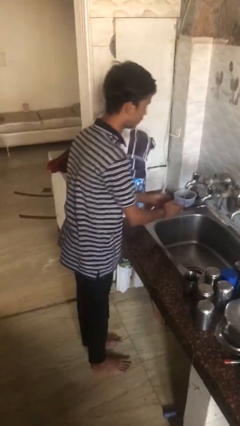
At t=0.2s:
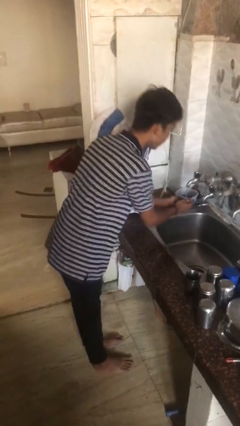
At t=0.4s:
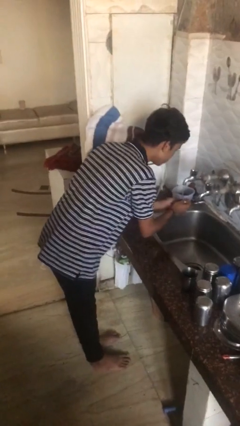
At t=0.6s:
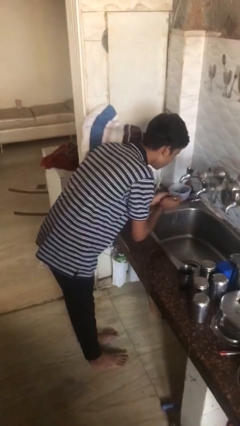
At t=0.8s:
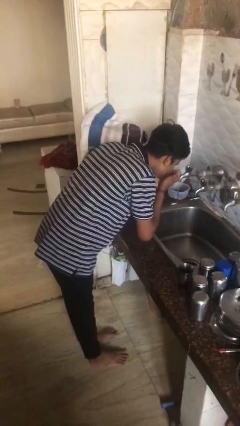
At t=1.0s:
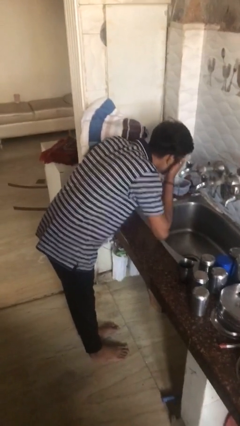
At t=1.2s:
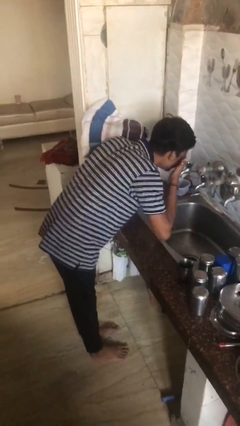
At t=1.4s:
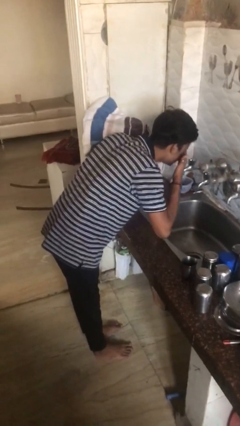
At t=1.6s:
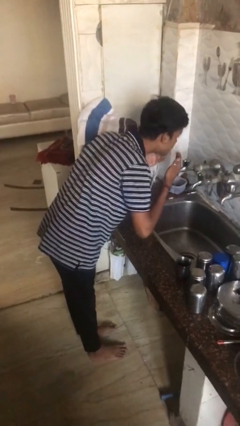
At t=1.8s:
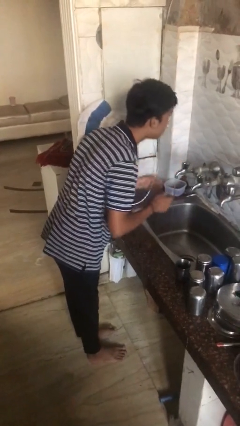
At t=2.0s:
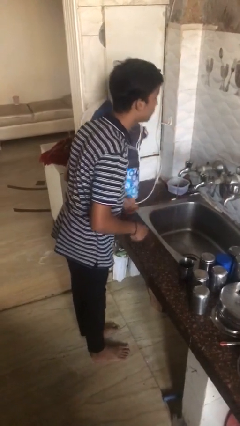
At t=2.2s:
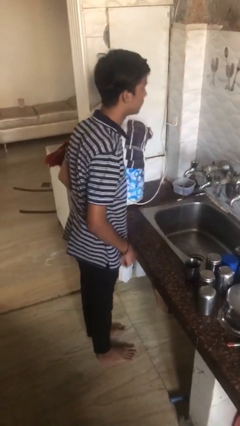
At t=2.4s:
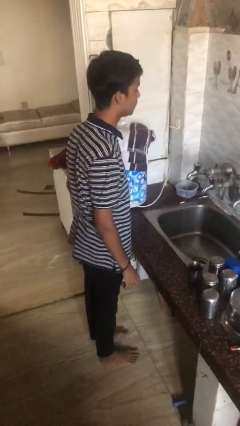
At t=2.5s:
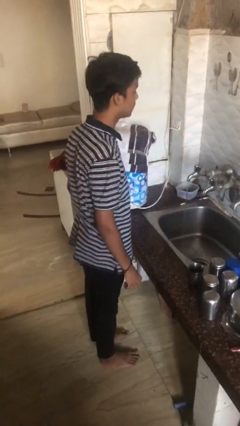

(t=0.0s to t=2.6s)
person washes face

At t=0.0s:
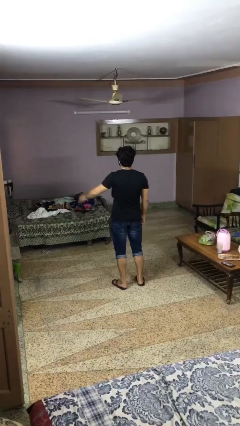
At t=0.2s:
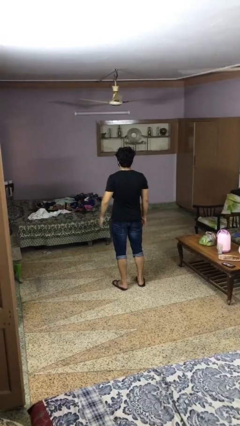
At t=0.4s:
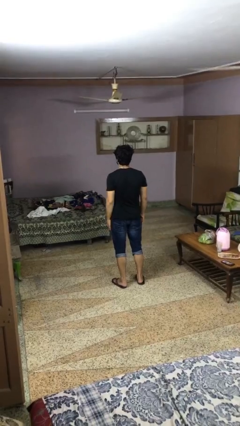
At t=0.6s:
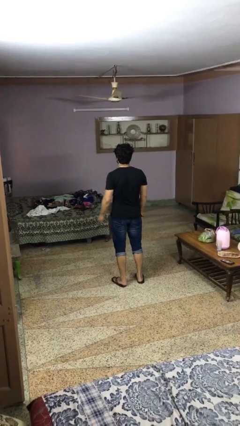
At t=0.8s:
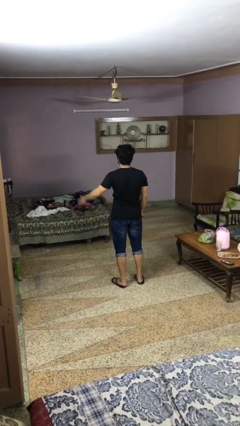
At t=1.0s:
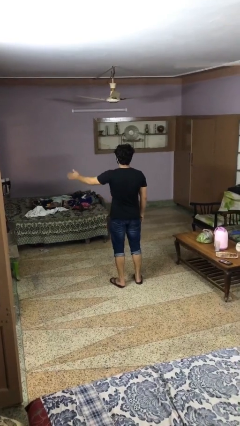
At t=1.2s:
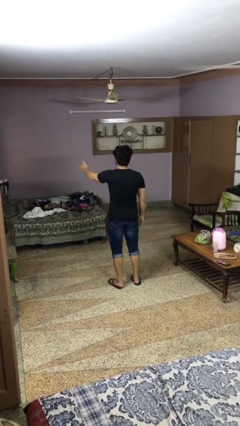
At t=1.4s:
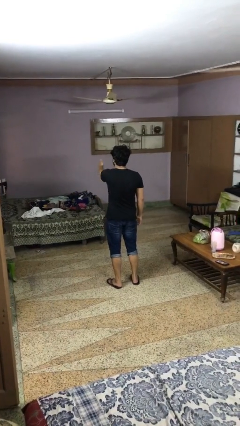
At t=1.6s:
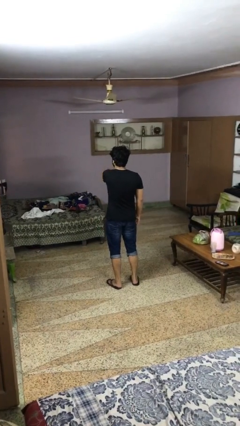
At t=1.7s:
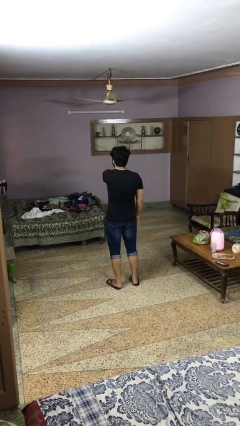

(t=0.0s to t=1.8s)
person gestures swipe right

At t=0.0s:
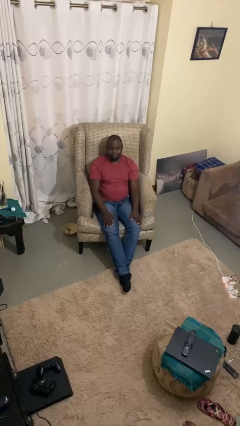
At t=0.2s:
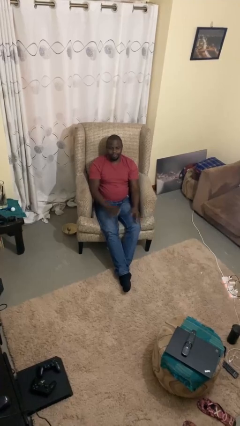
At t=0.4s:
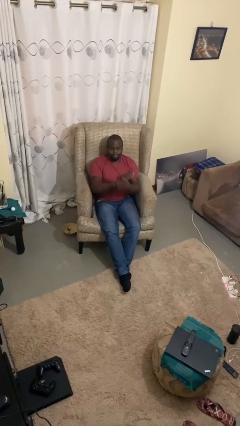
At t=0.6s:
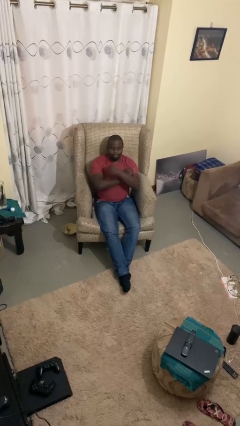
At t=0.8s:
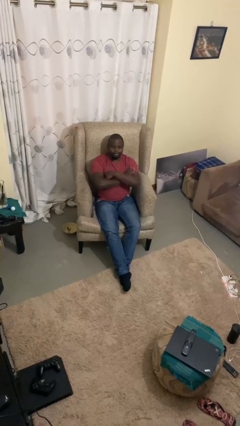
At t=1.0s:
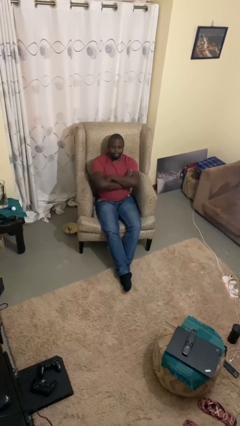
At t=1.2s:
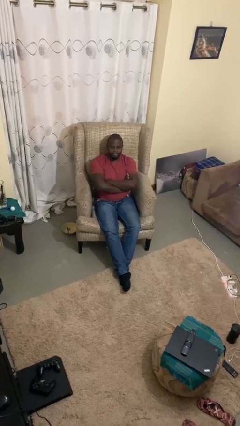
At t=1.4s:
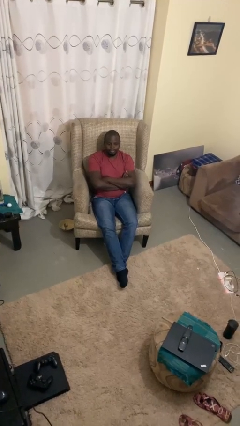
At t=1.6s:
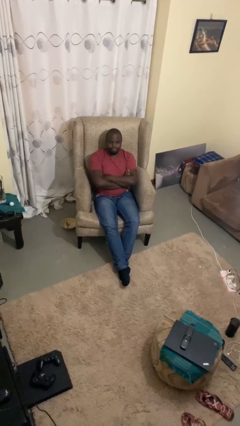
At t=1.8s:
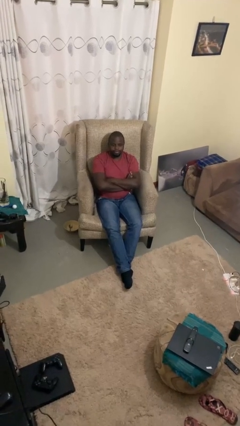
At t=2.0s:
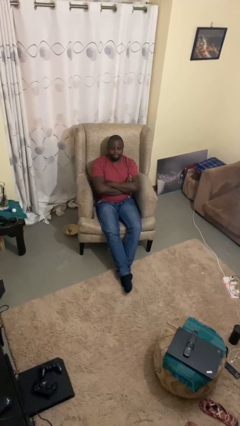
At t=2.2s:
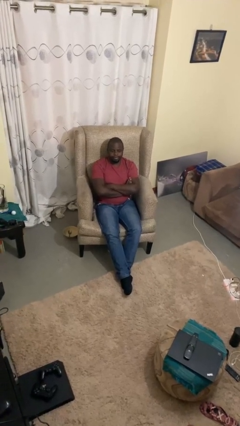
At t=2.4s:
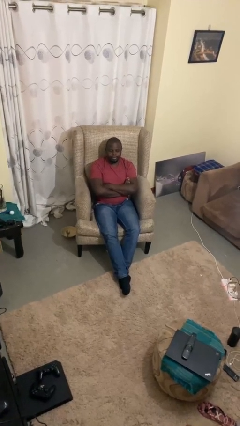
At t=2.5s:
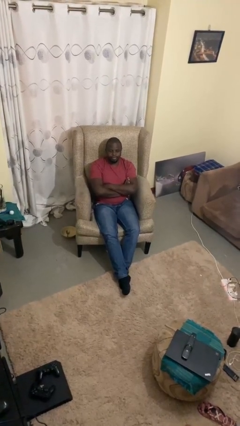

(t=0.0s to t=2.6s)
person crosses arms

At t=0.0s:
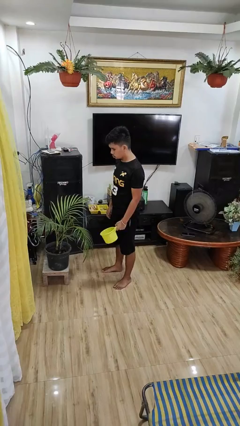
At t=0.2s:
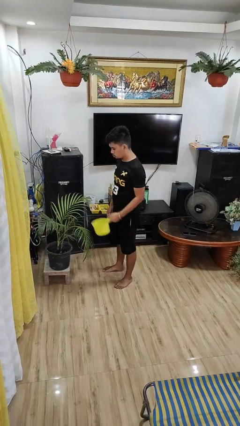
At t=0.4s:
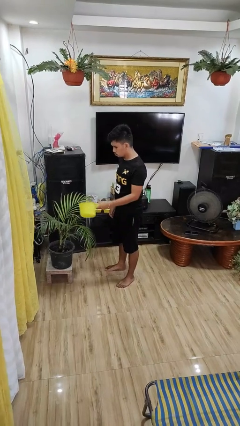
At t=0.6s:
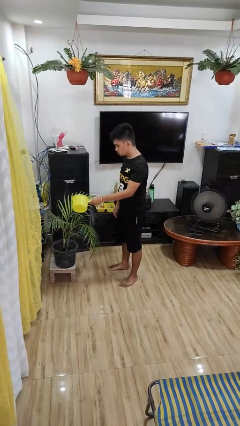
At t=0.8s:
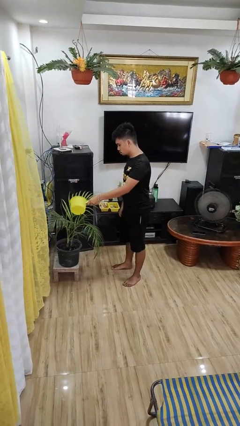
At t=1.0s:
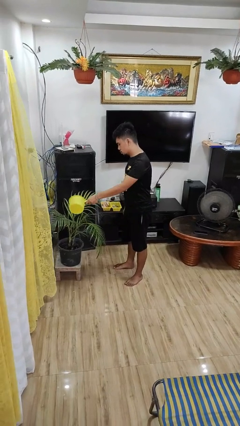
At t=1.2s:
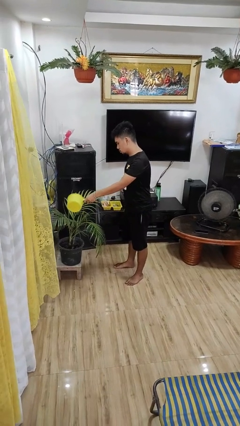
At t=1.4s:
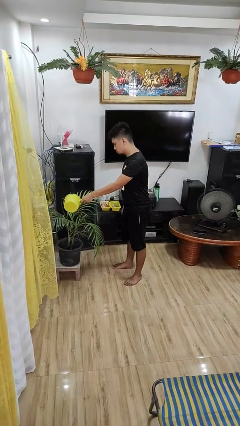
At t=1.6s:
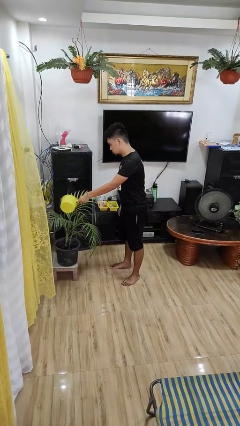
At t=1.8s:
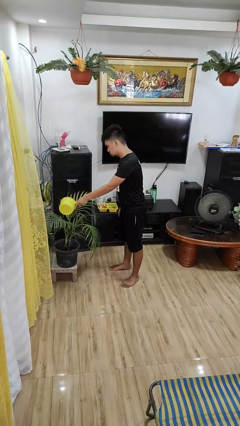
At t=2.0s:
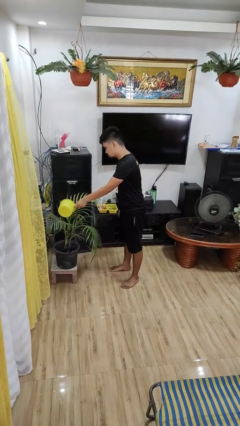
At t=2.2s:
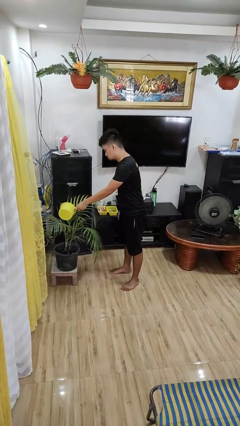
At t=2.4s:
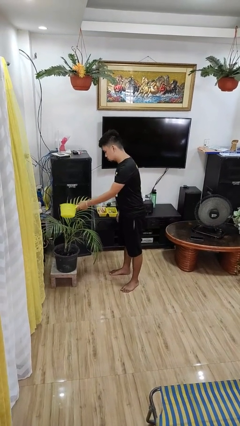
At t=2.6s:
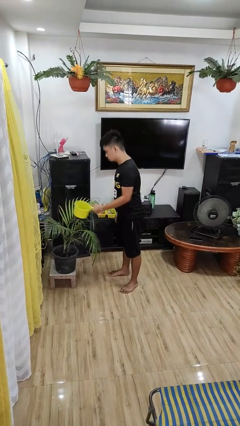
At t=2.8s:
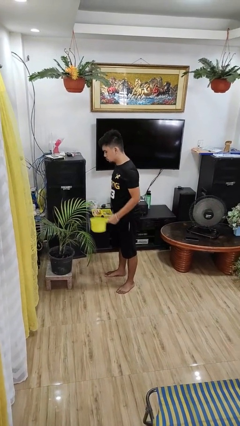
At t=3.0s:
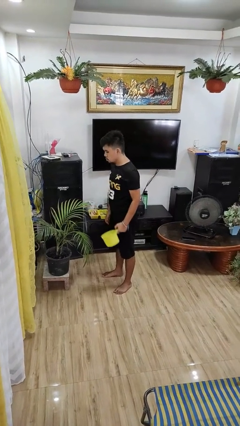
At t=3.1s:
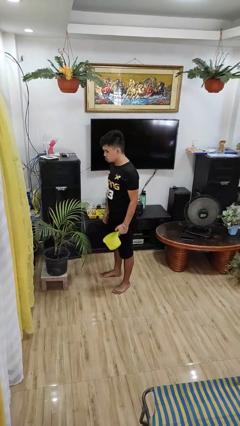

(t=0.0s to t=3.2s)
person waters houseplant

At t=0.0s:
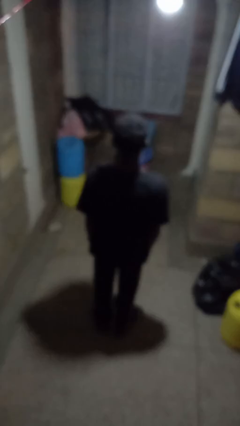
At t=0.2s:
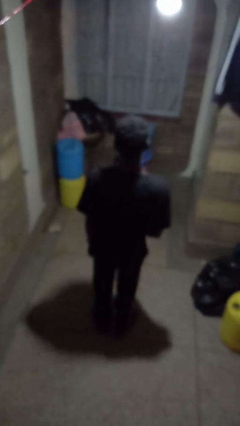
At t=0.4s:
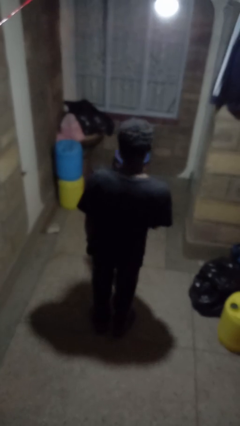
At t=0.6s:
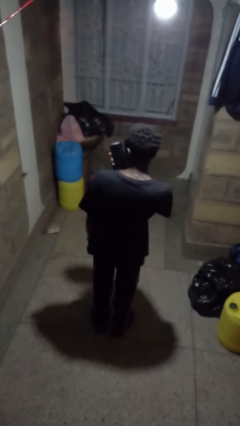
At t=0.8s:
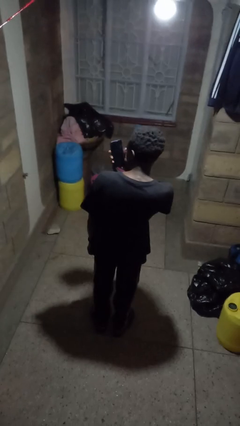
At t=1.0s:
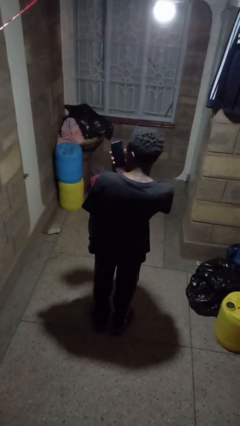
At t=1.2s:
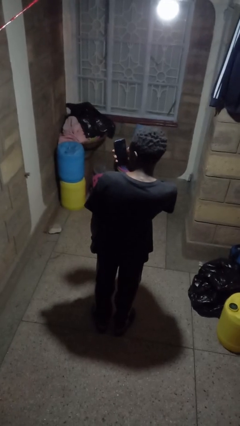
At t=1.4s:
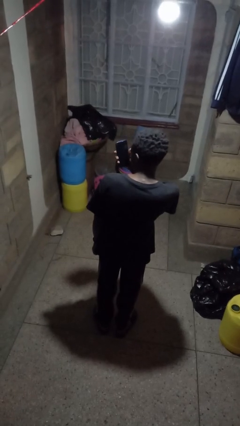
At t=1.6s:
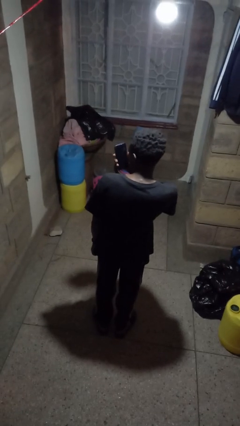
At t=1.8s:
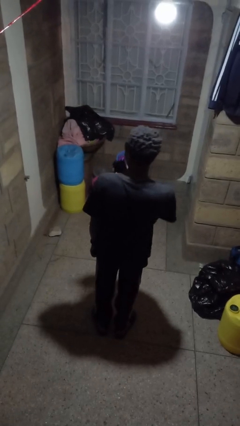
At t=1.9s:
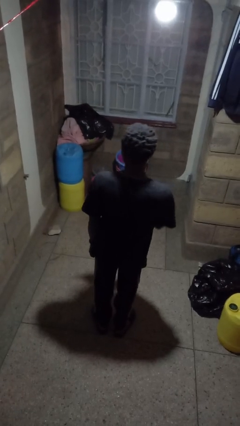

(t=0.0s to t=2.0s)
person takes selfie

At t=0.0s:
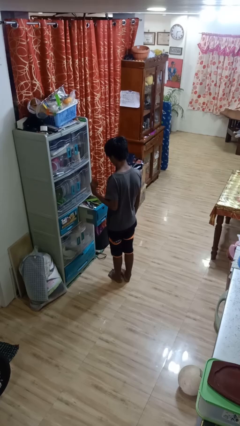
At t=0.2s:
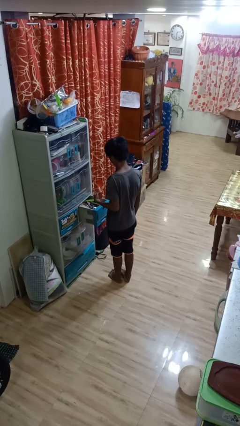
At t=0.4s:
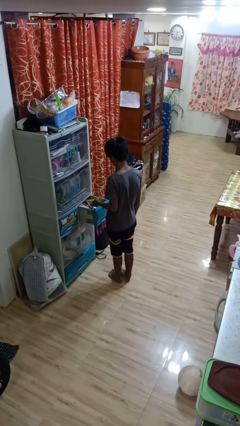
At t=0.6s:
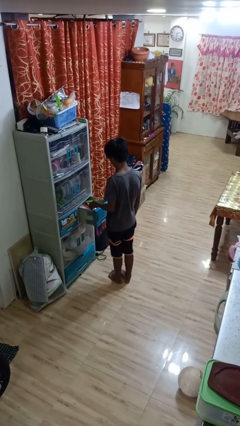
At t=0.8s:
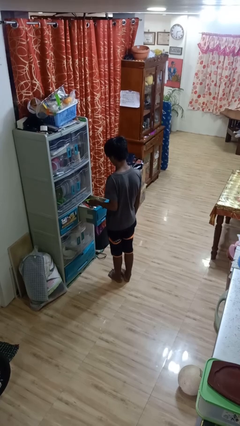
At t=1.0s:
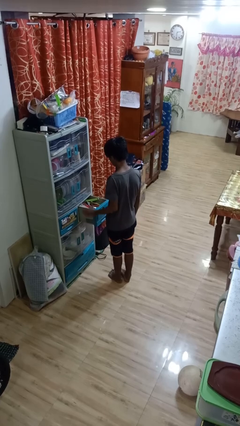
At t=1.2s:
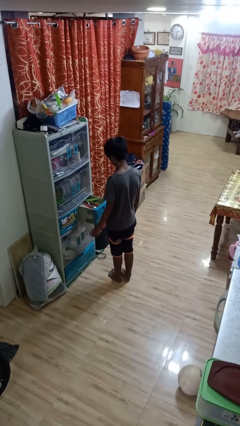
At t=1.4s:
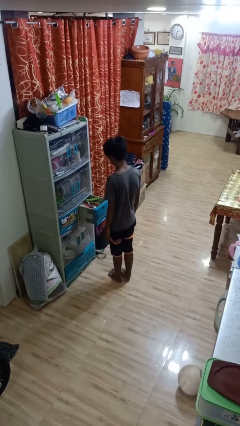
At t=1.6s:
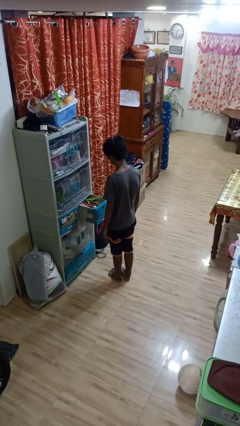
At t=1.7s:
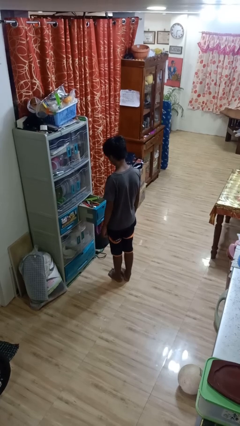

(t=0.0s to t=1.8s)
person puts object into kitchen drawer

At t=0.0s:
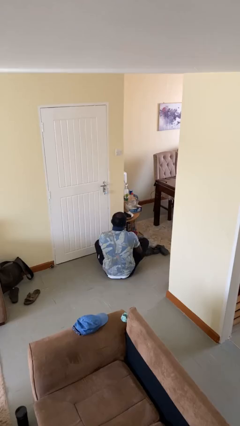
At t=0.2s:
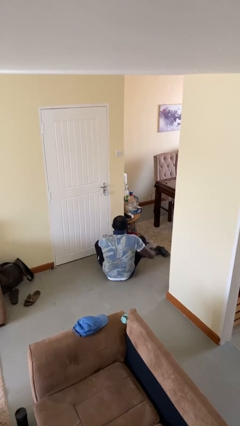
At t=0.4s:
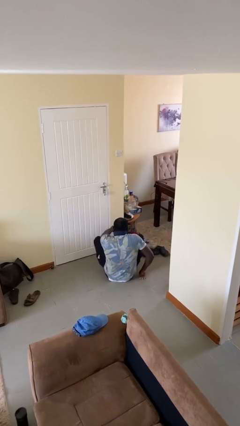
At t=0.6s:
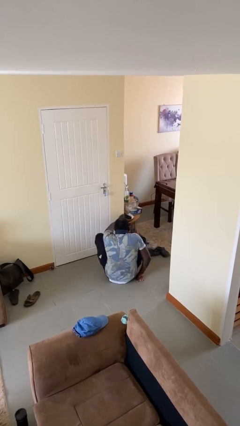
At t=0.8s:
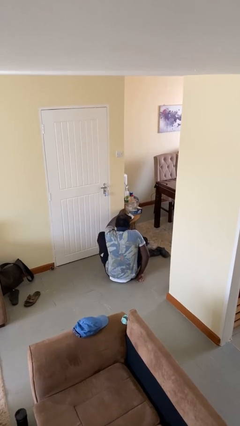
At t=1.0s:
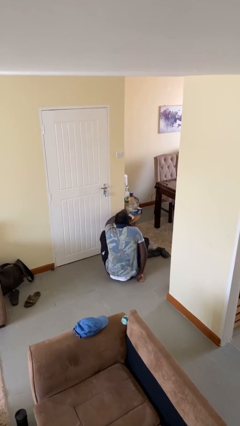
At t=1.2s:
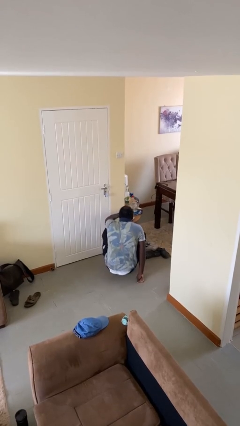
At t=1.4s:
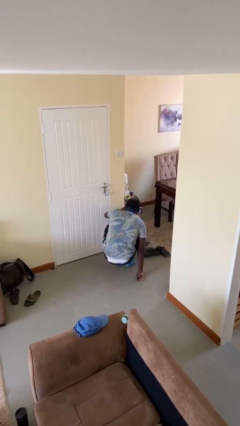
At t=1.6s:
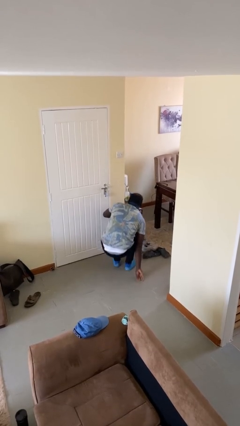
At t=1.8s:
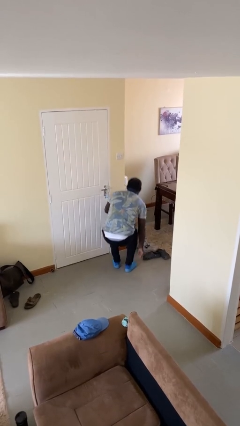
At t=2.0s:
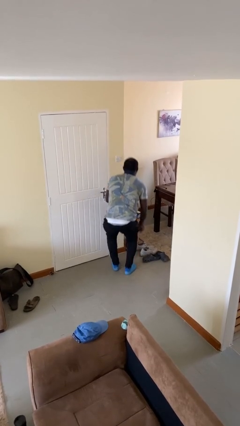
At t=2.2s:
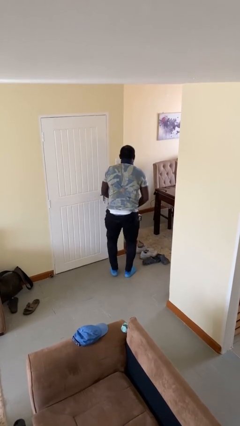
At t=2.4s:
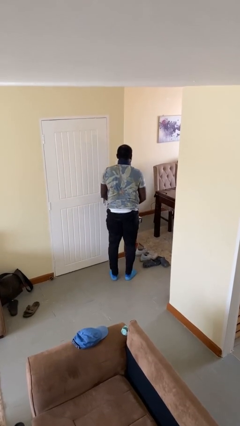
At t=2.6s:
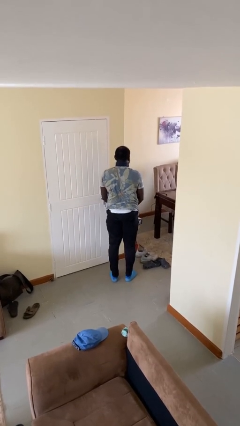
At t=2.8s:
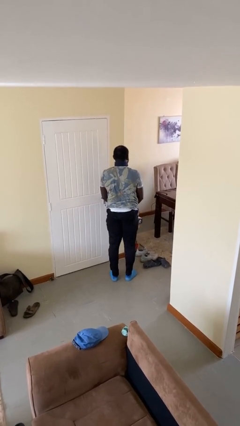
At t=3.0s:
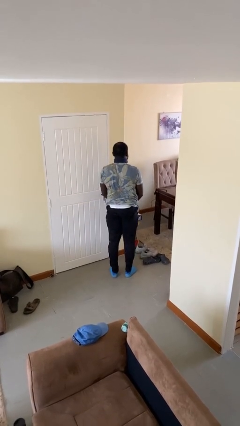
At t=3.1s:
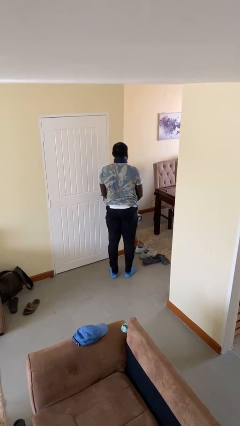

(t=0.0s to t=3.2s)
person stands up from floor
